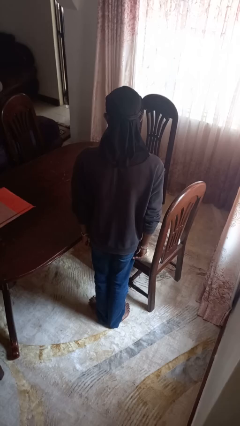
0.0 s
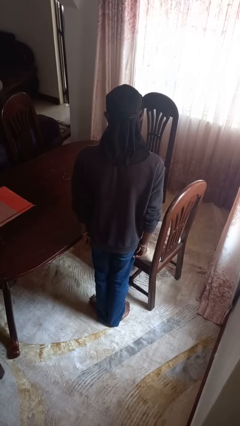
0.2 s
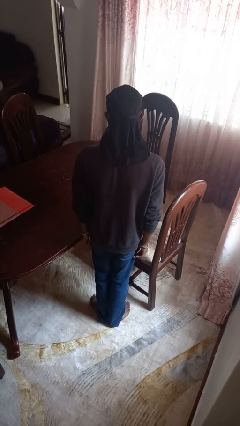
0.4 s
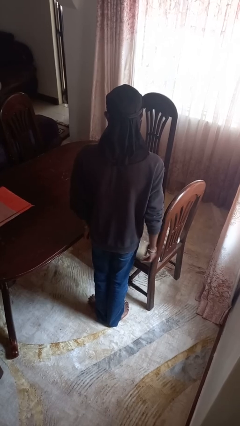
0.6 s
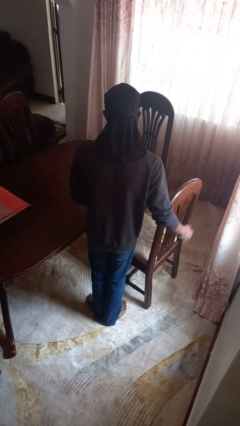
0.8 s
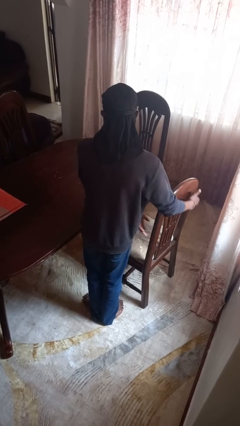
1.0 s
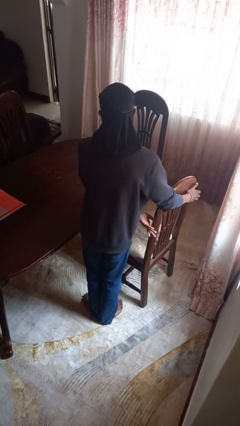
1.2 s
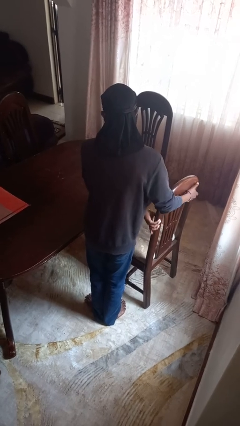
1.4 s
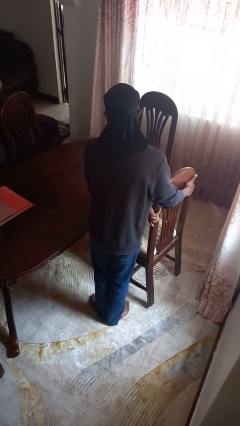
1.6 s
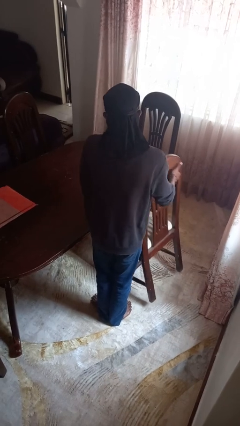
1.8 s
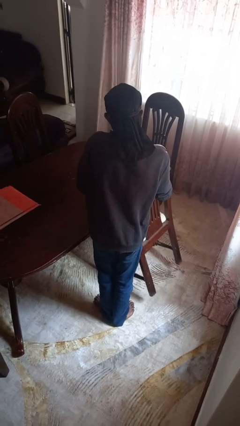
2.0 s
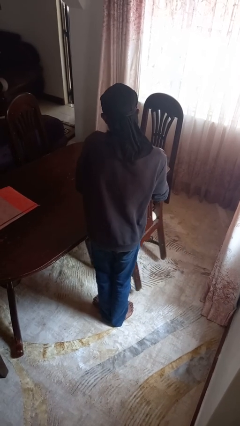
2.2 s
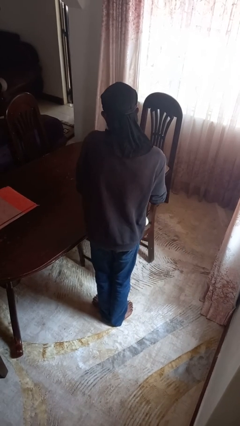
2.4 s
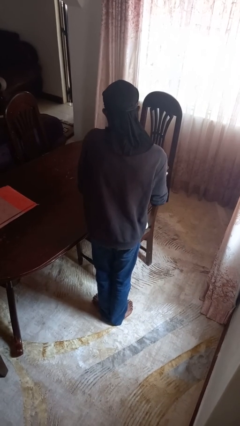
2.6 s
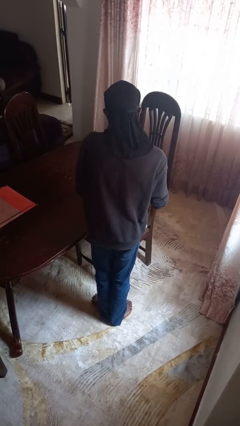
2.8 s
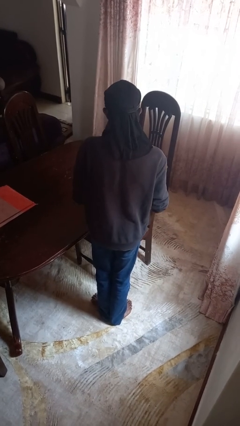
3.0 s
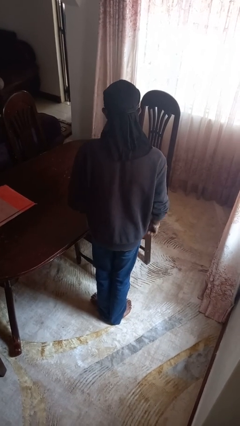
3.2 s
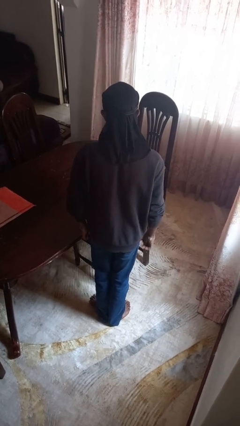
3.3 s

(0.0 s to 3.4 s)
person pushes in chair

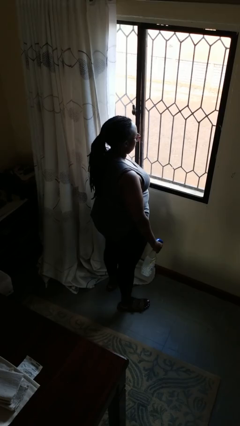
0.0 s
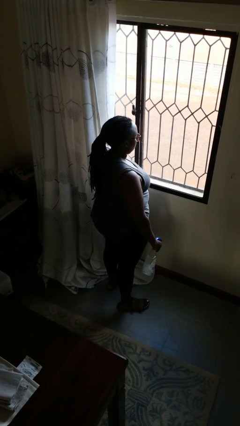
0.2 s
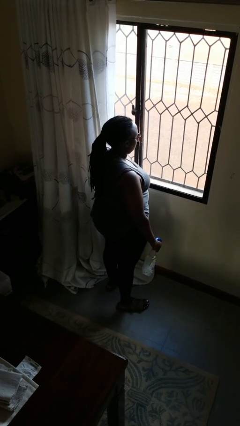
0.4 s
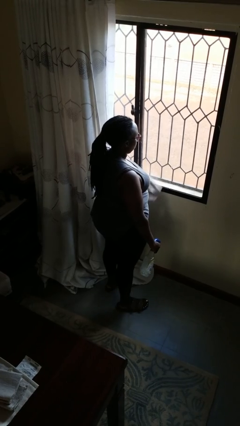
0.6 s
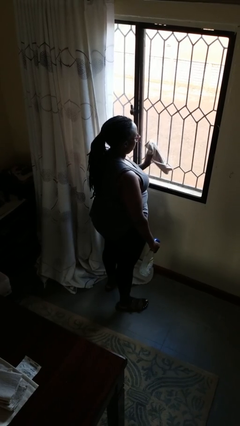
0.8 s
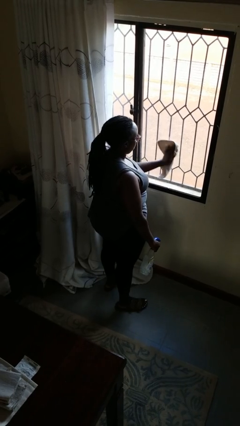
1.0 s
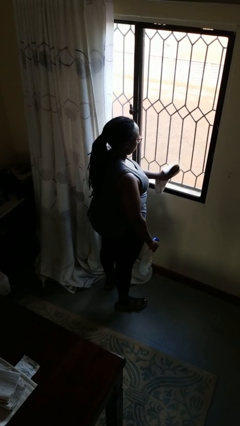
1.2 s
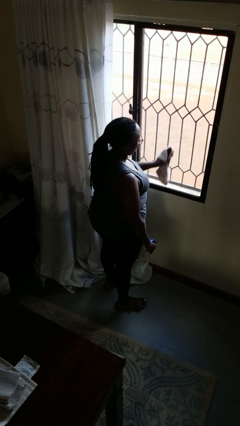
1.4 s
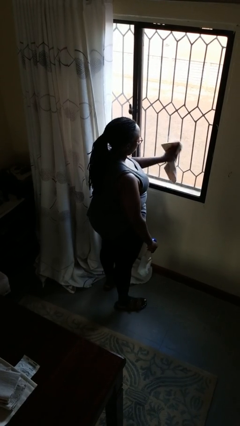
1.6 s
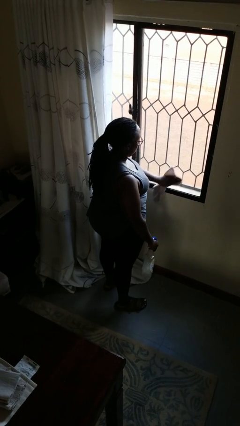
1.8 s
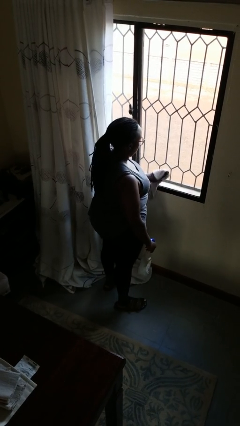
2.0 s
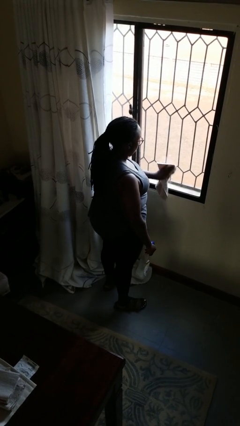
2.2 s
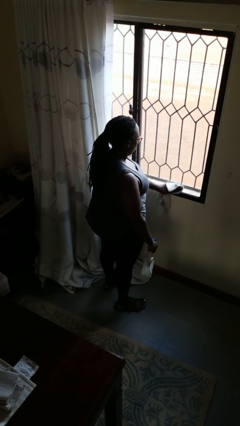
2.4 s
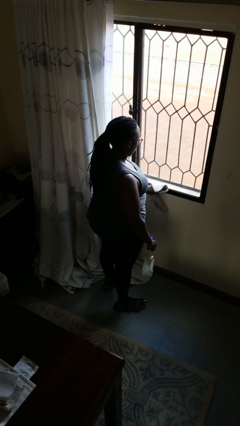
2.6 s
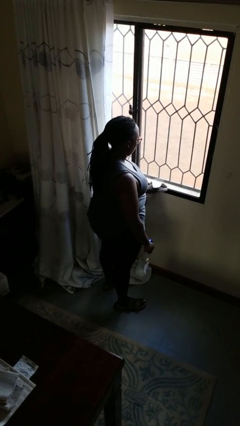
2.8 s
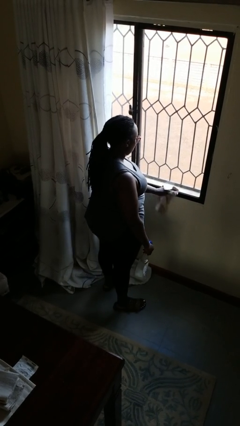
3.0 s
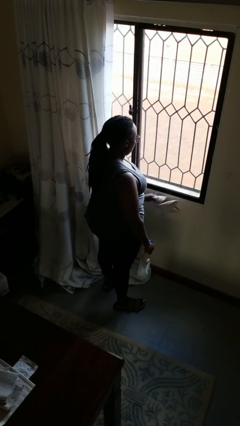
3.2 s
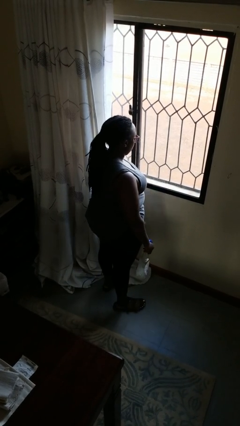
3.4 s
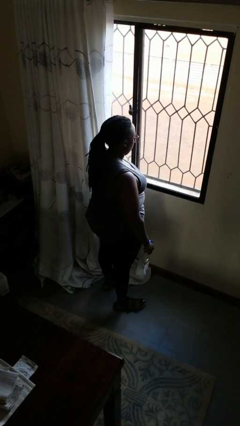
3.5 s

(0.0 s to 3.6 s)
person washes window

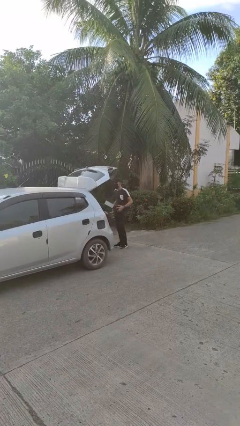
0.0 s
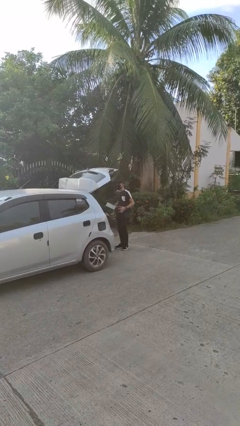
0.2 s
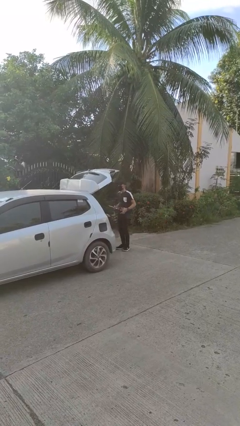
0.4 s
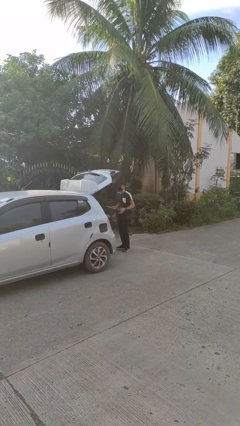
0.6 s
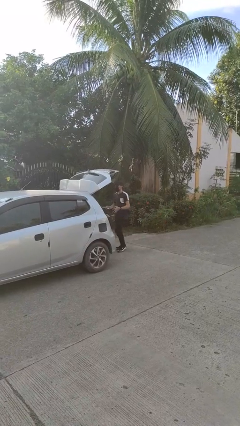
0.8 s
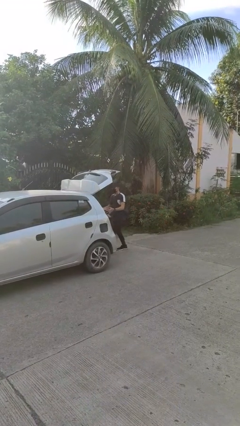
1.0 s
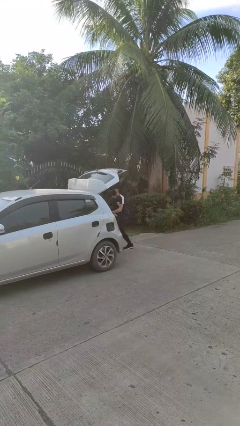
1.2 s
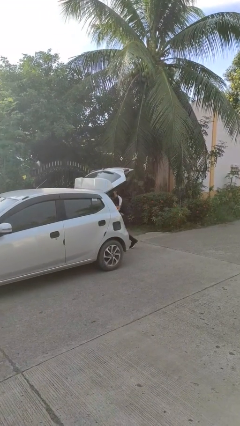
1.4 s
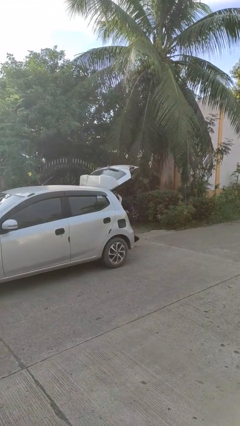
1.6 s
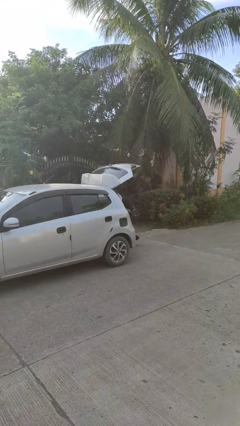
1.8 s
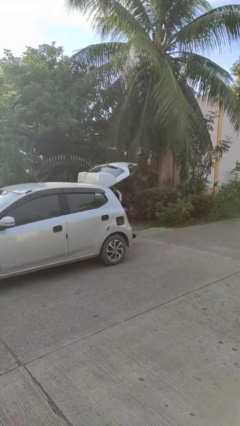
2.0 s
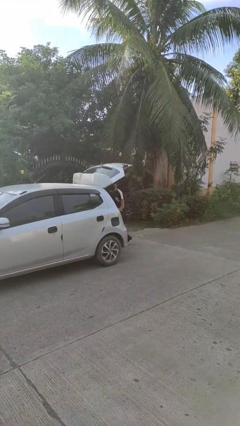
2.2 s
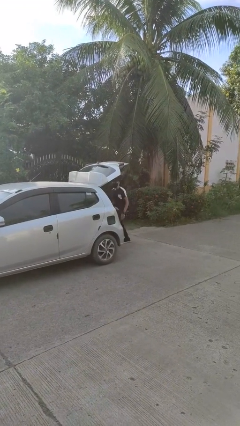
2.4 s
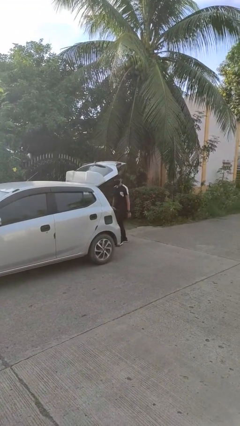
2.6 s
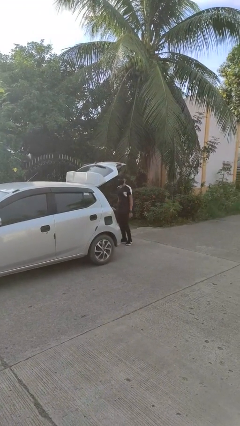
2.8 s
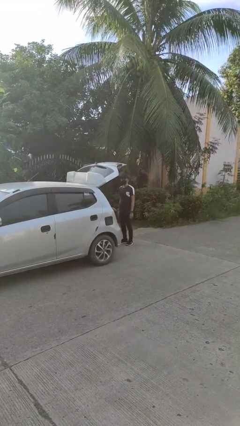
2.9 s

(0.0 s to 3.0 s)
person loads car

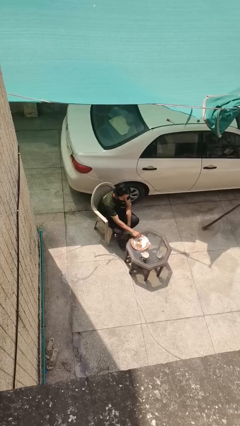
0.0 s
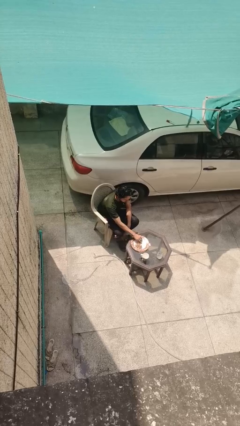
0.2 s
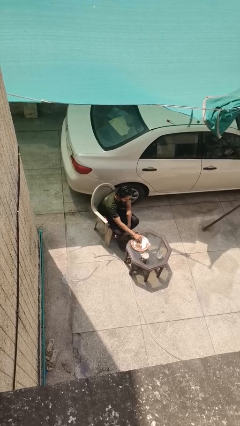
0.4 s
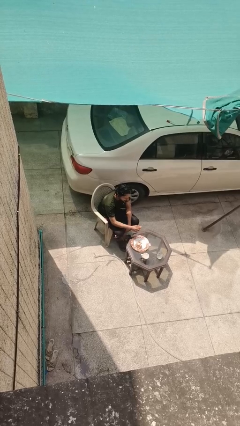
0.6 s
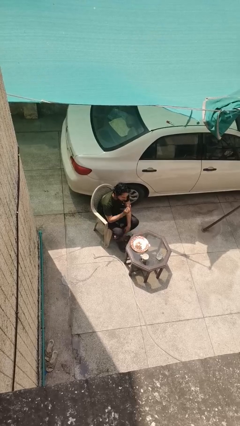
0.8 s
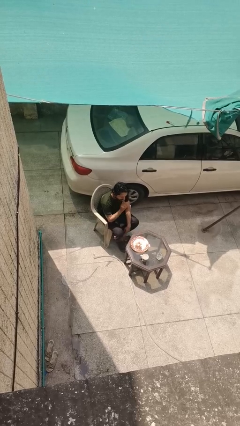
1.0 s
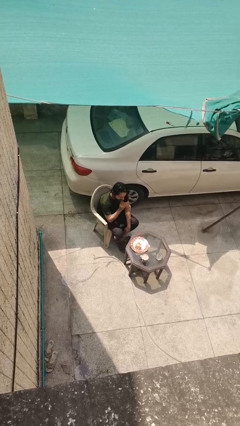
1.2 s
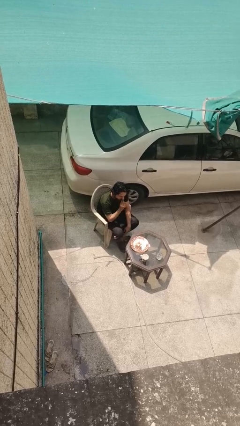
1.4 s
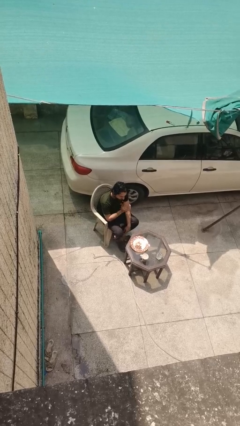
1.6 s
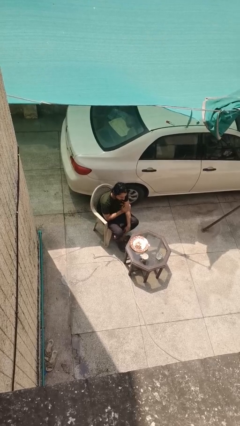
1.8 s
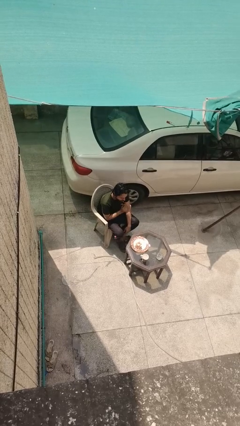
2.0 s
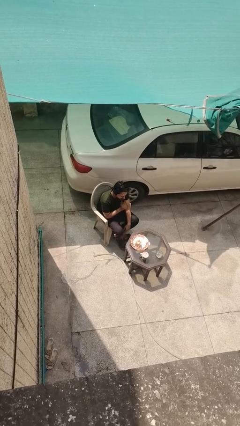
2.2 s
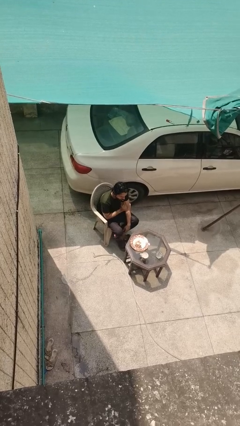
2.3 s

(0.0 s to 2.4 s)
person eats with hands

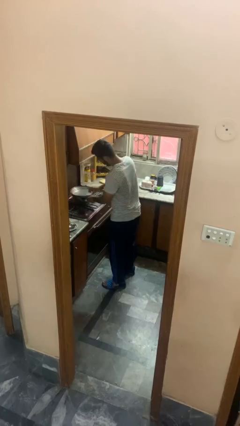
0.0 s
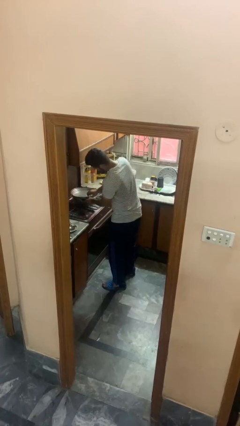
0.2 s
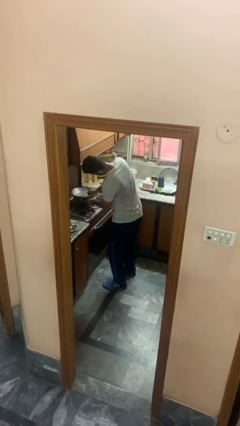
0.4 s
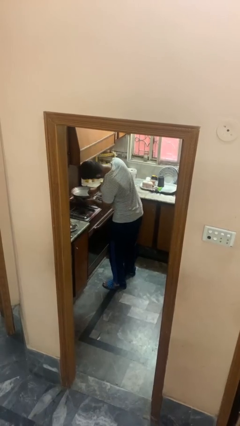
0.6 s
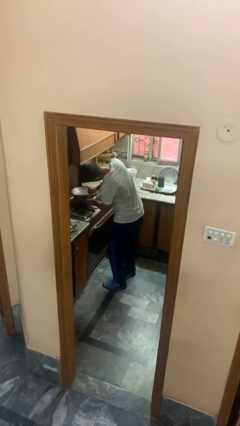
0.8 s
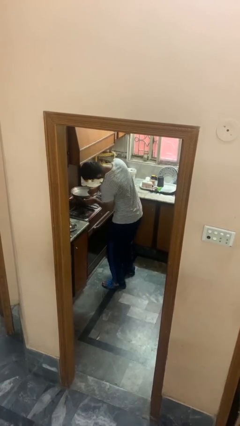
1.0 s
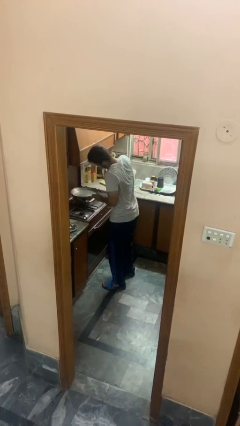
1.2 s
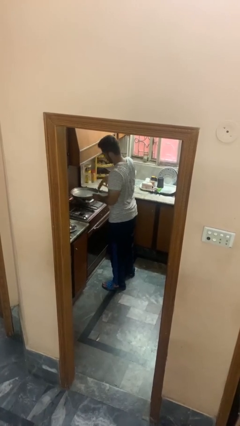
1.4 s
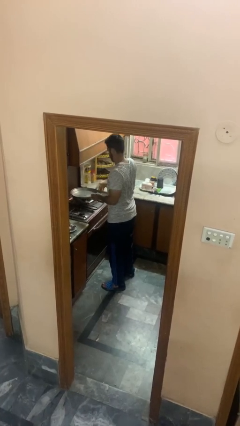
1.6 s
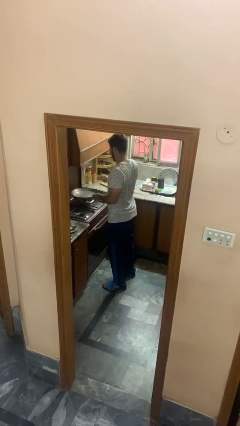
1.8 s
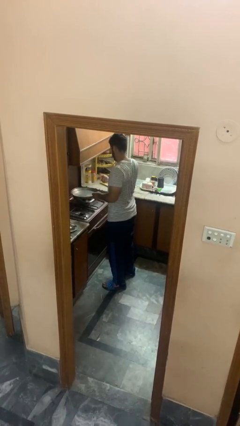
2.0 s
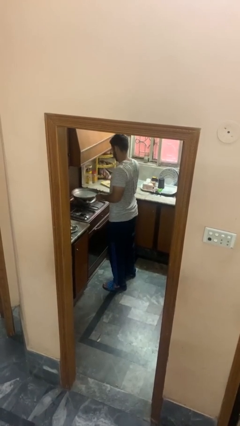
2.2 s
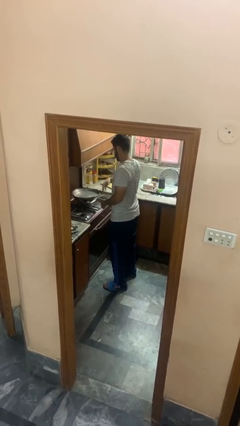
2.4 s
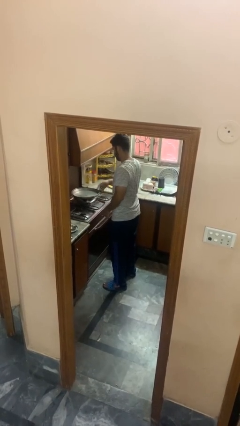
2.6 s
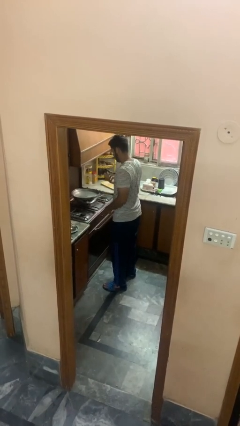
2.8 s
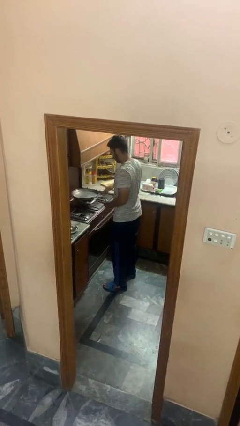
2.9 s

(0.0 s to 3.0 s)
person burns hand

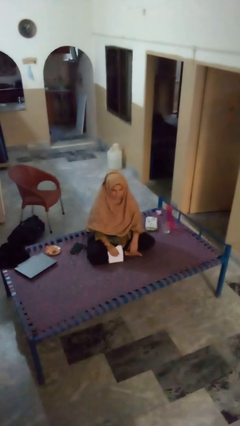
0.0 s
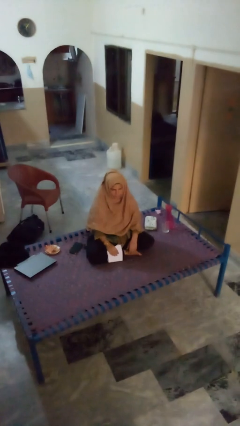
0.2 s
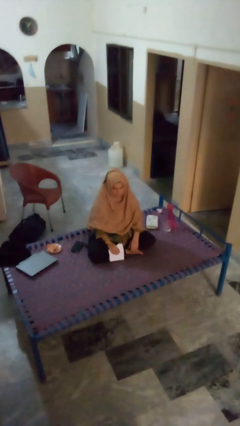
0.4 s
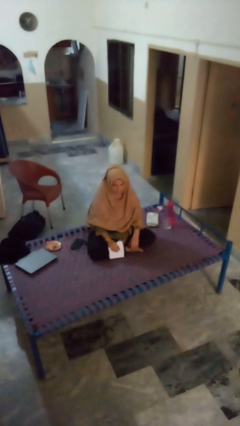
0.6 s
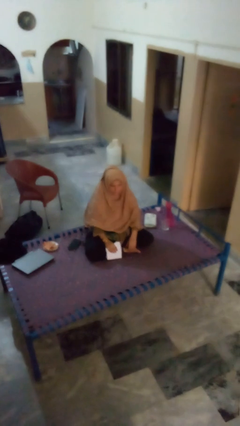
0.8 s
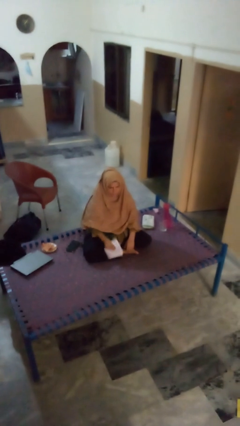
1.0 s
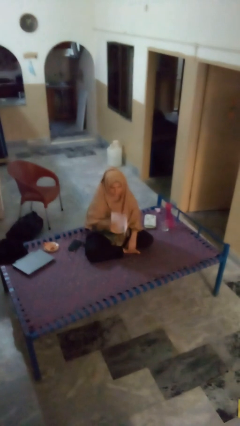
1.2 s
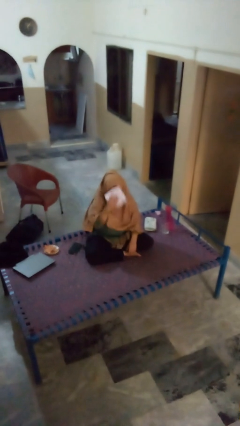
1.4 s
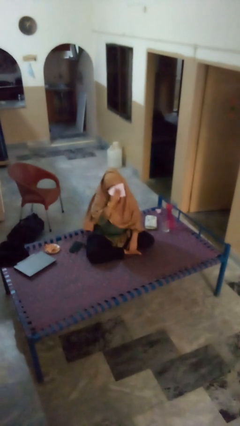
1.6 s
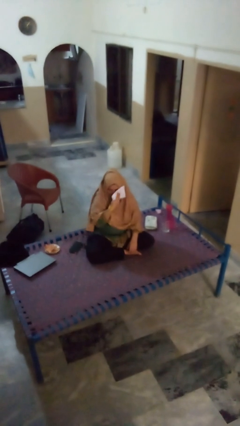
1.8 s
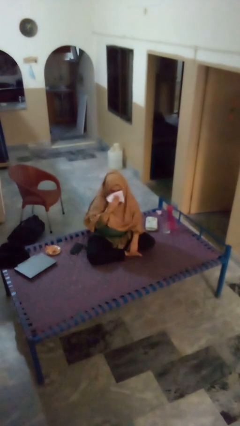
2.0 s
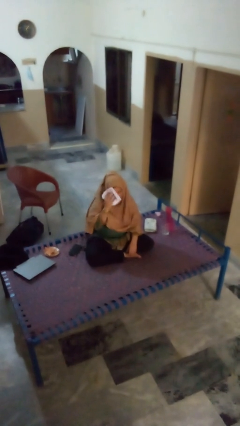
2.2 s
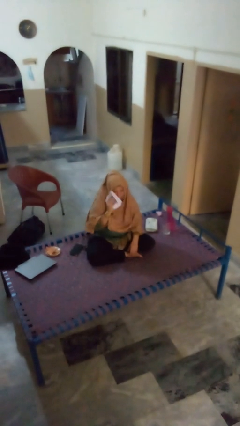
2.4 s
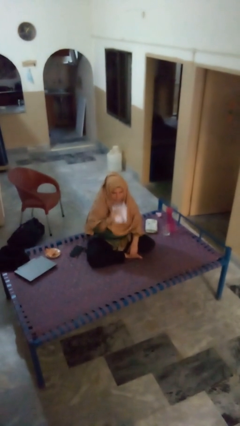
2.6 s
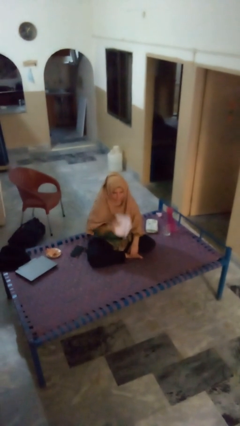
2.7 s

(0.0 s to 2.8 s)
person wipes mouth with napkin
